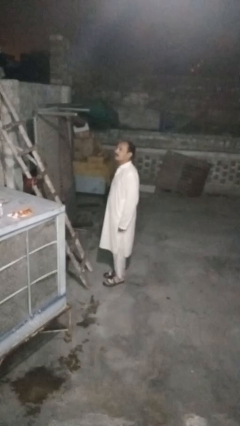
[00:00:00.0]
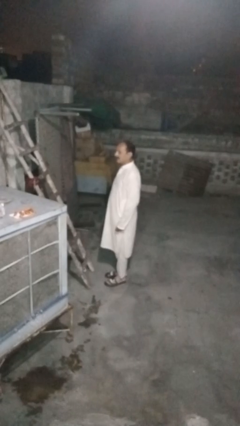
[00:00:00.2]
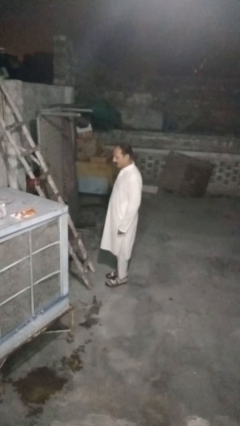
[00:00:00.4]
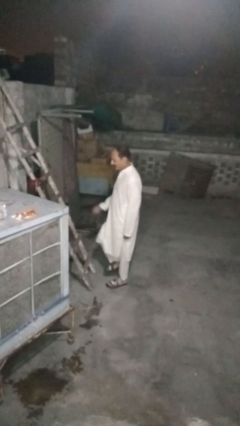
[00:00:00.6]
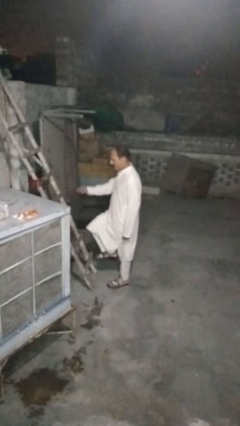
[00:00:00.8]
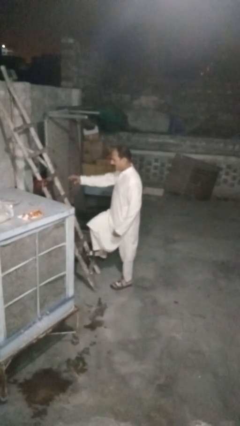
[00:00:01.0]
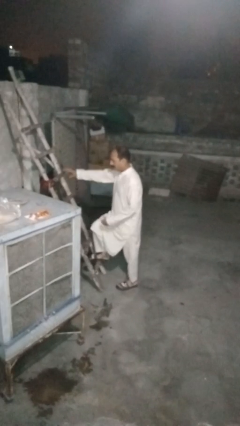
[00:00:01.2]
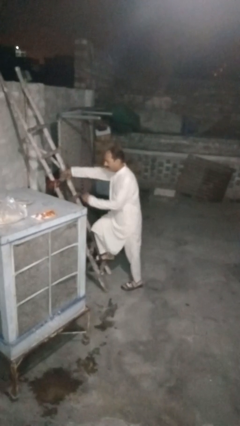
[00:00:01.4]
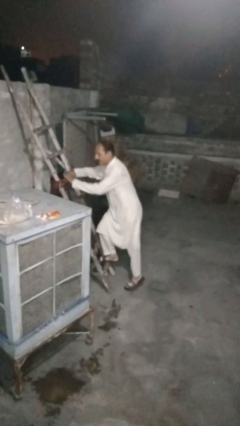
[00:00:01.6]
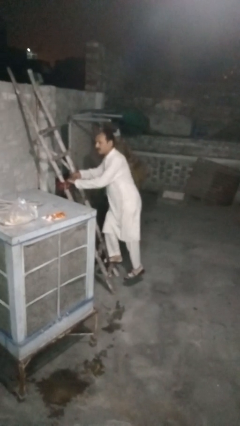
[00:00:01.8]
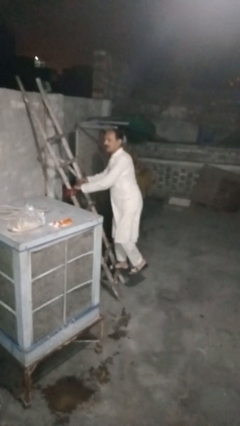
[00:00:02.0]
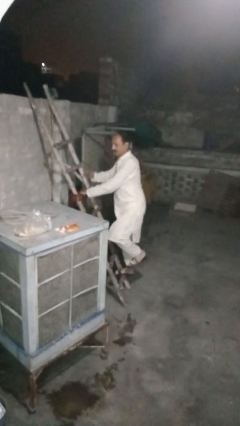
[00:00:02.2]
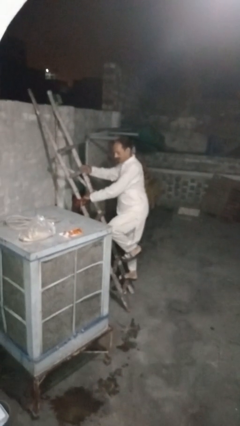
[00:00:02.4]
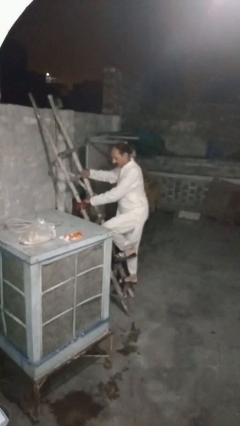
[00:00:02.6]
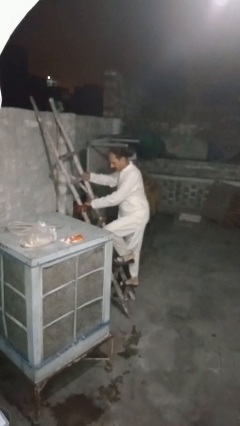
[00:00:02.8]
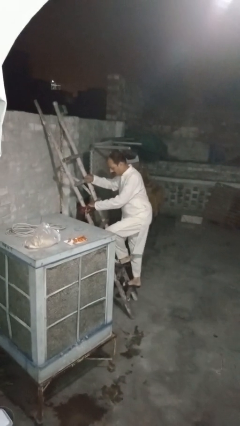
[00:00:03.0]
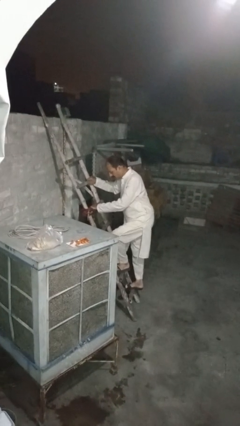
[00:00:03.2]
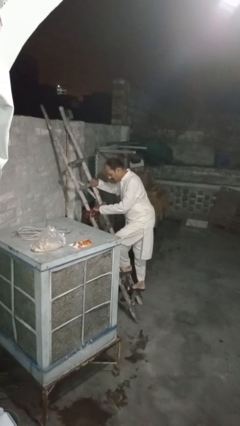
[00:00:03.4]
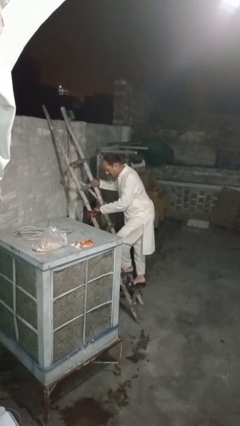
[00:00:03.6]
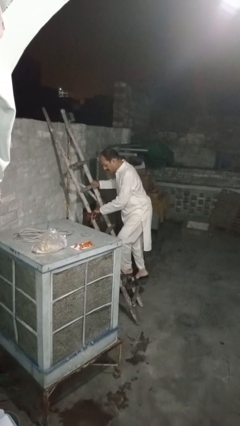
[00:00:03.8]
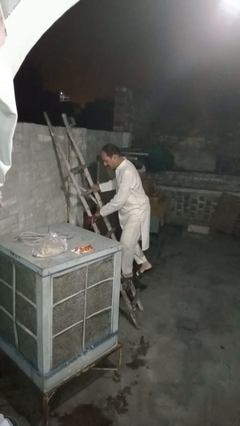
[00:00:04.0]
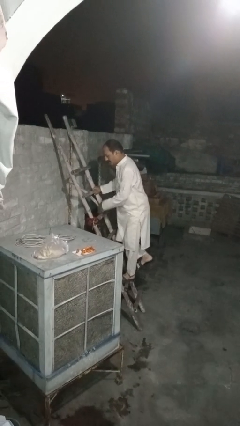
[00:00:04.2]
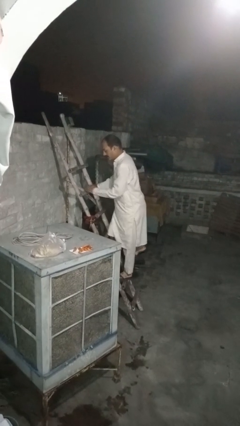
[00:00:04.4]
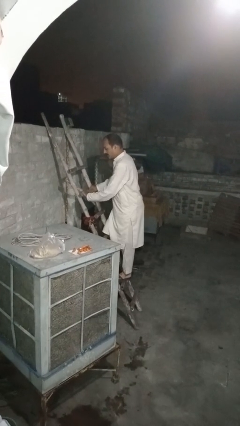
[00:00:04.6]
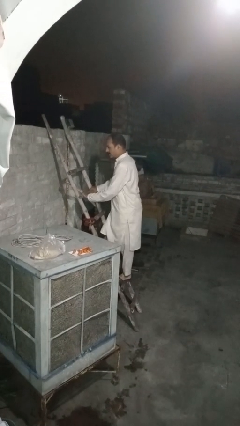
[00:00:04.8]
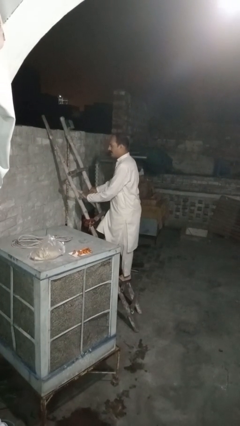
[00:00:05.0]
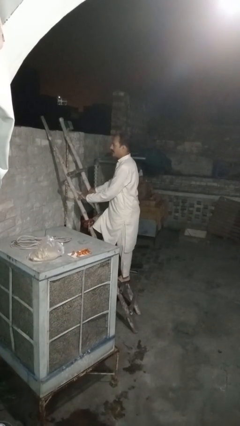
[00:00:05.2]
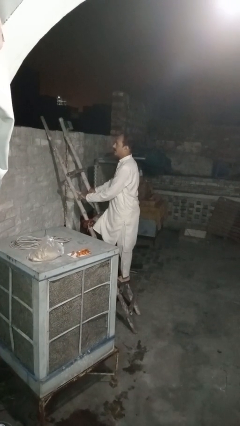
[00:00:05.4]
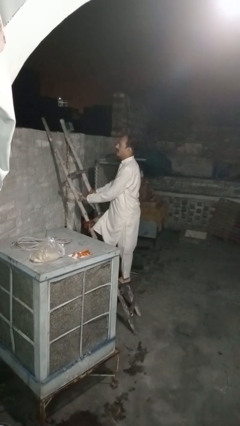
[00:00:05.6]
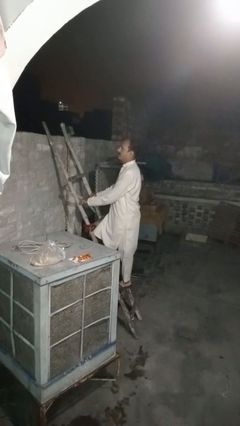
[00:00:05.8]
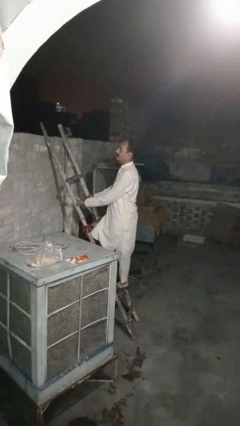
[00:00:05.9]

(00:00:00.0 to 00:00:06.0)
person climbs up ladder

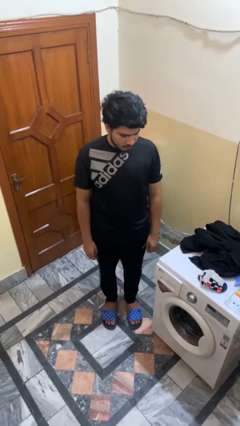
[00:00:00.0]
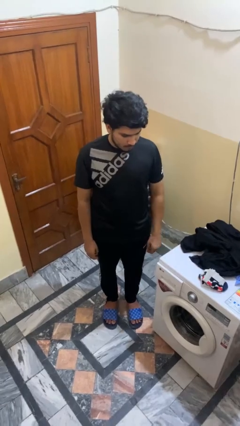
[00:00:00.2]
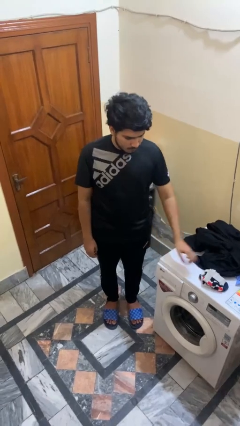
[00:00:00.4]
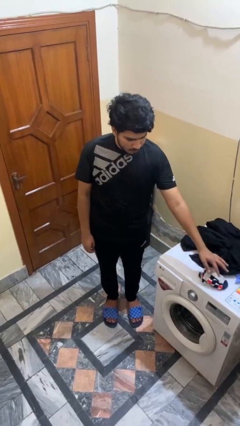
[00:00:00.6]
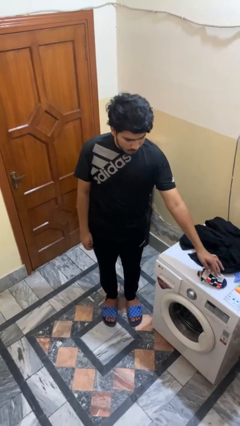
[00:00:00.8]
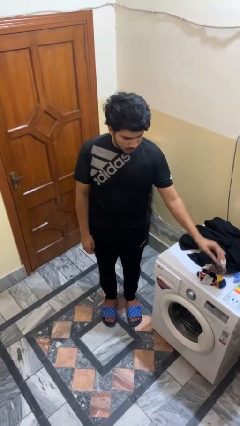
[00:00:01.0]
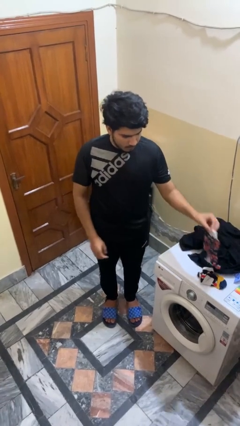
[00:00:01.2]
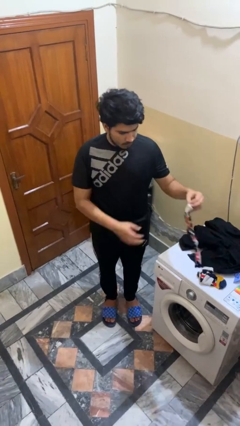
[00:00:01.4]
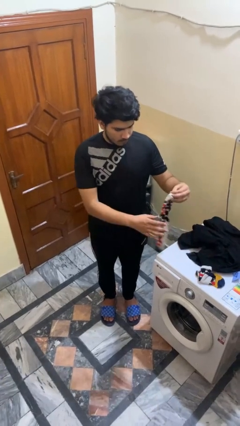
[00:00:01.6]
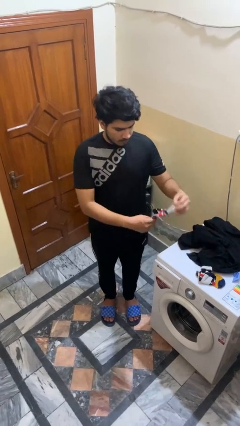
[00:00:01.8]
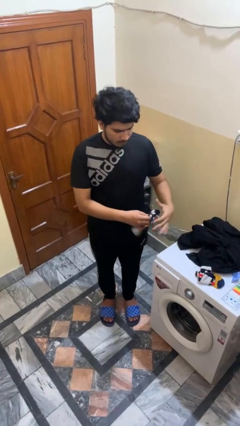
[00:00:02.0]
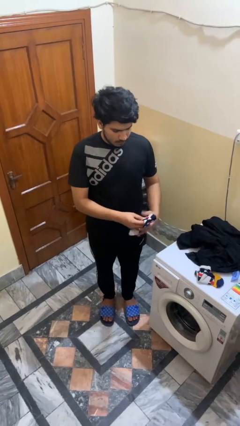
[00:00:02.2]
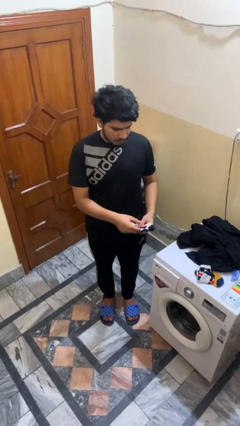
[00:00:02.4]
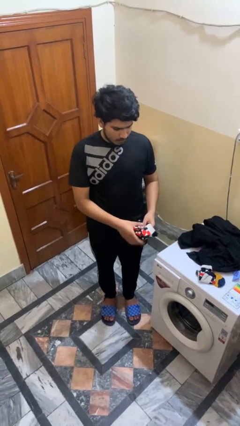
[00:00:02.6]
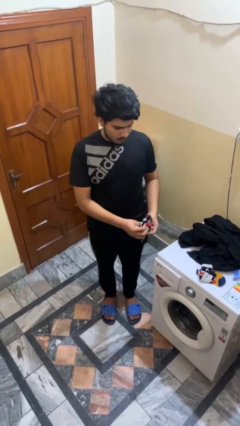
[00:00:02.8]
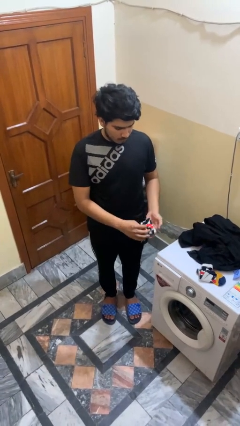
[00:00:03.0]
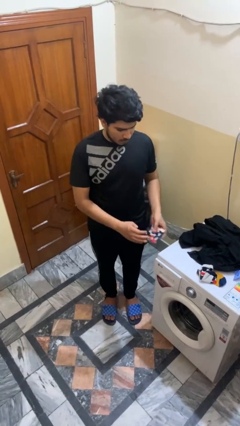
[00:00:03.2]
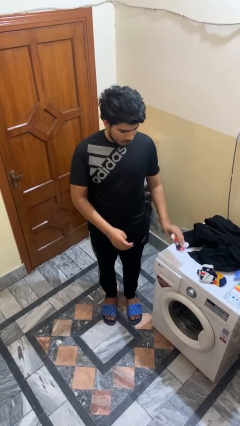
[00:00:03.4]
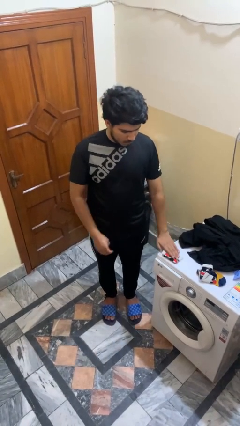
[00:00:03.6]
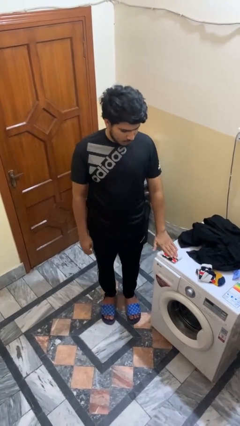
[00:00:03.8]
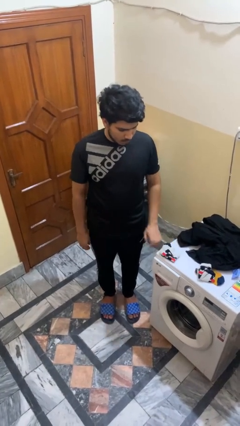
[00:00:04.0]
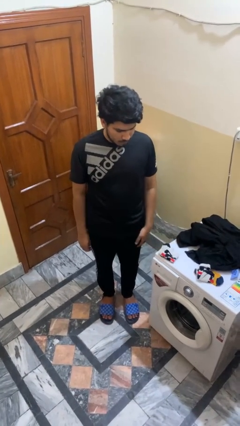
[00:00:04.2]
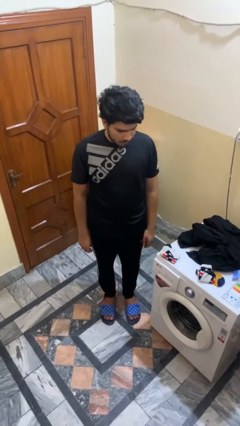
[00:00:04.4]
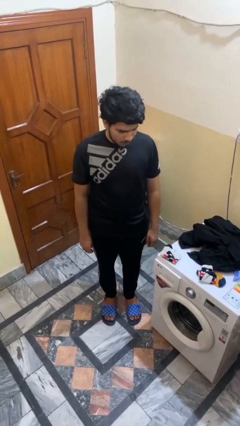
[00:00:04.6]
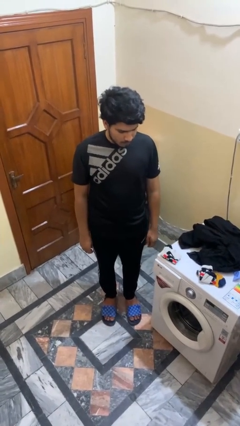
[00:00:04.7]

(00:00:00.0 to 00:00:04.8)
person folds socks

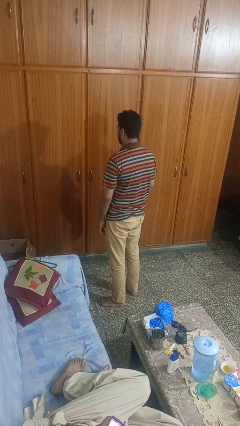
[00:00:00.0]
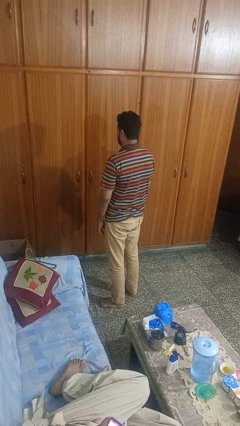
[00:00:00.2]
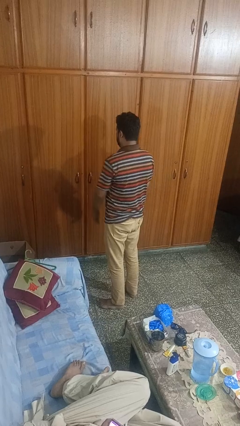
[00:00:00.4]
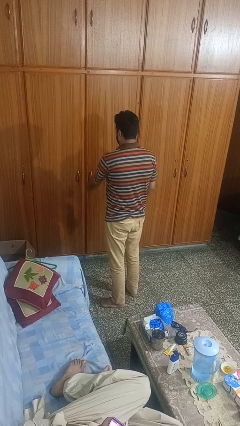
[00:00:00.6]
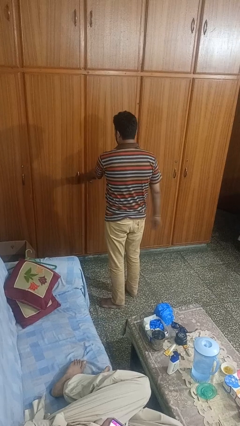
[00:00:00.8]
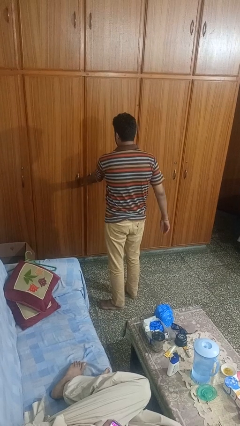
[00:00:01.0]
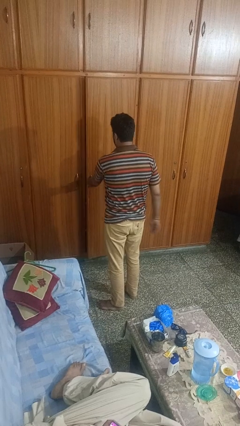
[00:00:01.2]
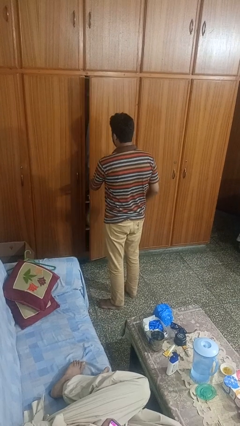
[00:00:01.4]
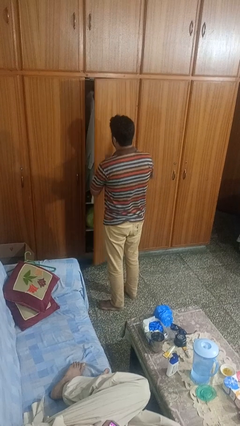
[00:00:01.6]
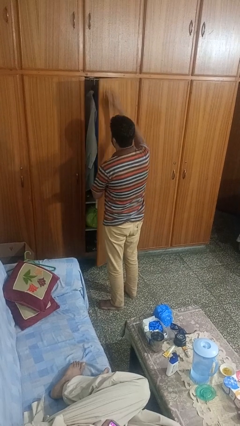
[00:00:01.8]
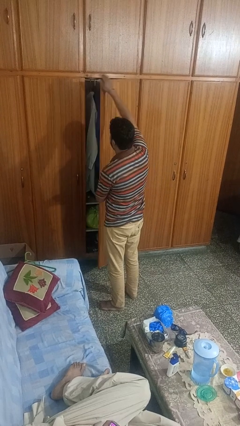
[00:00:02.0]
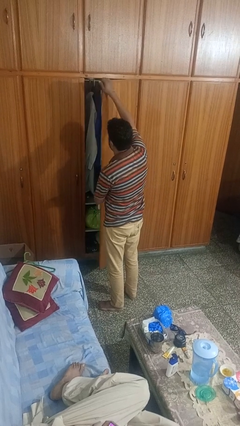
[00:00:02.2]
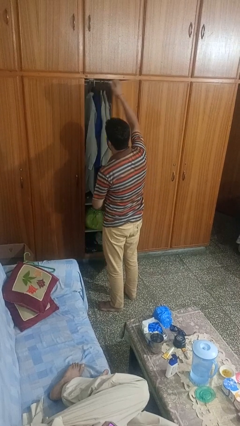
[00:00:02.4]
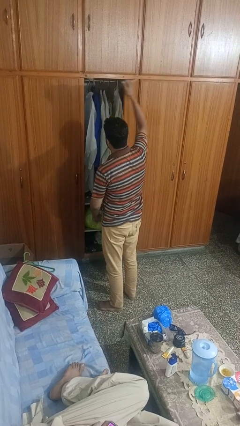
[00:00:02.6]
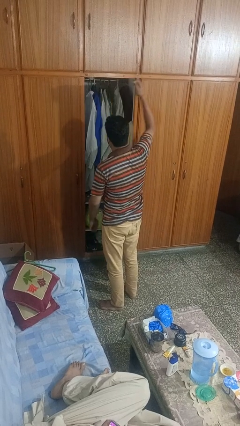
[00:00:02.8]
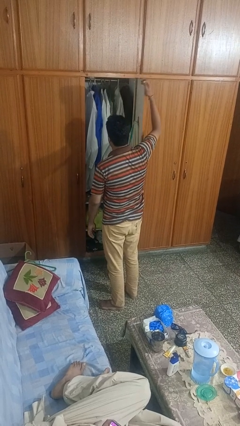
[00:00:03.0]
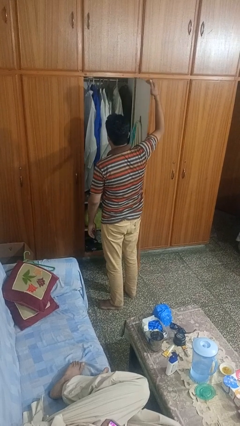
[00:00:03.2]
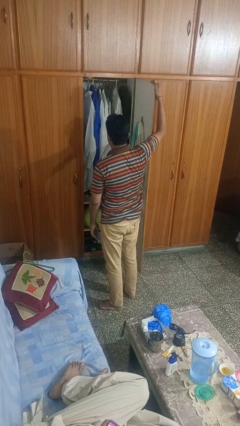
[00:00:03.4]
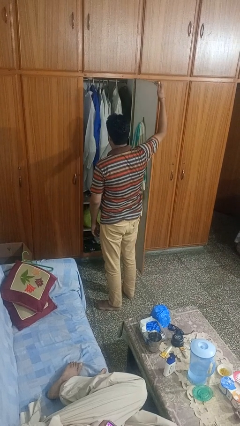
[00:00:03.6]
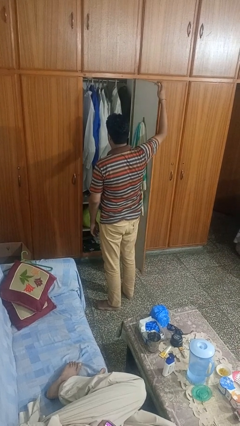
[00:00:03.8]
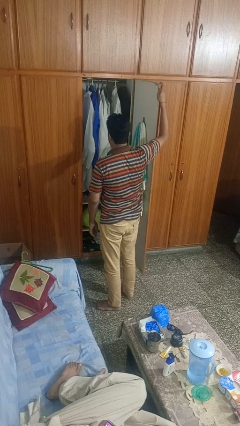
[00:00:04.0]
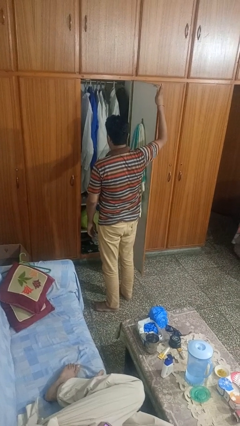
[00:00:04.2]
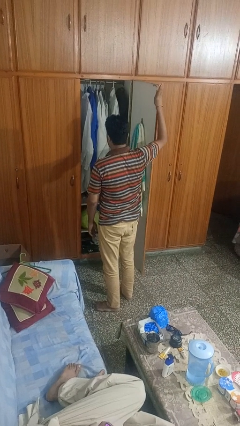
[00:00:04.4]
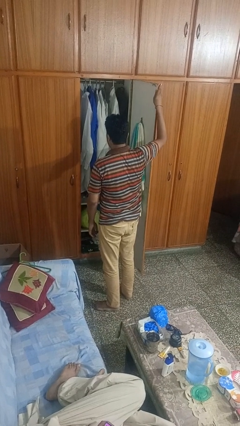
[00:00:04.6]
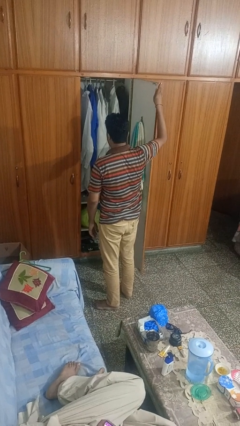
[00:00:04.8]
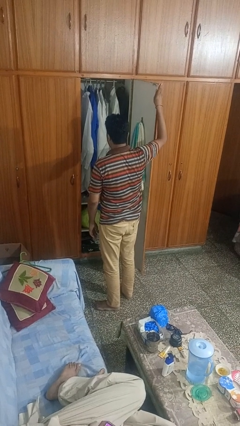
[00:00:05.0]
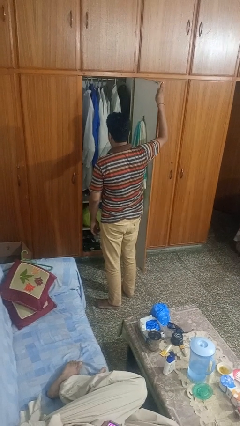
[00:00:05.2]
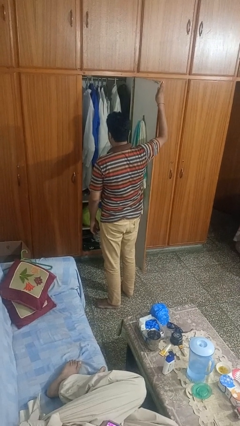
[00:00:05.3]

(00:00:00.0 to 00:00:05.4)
person opens closet door

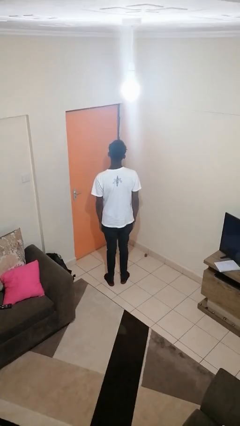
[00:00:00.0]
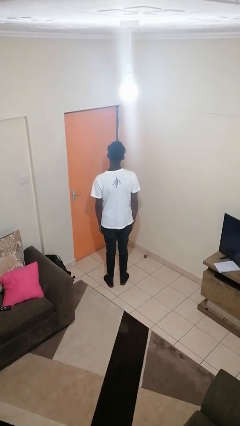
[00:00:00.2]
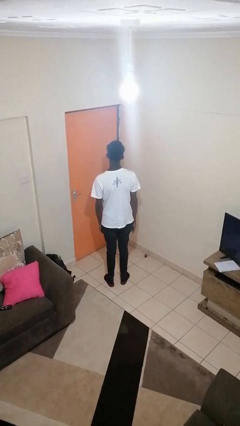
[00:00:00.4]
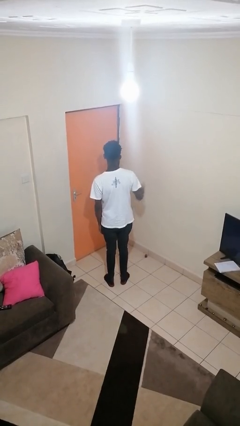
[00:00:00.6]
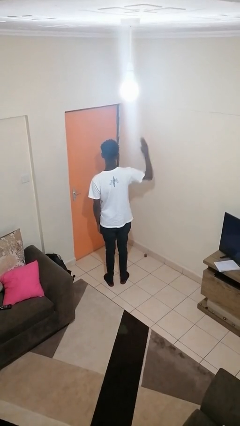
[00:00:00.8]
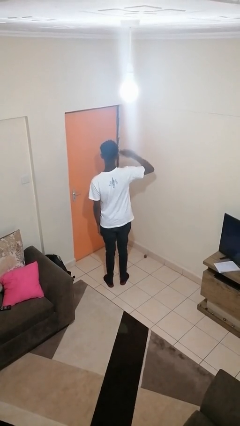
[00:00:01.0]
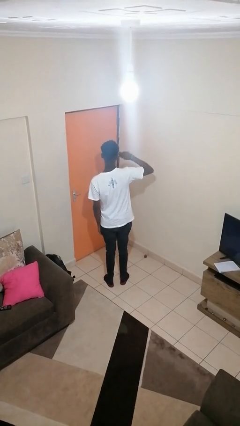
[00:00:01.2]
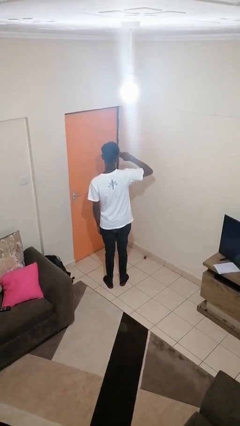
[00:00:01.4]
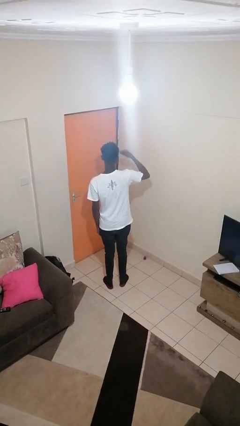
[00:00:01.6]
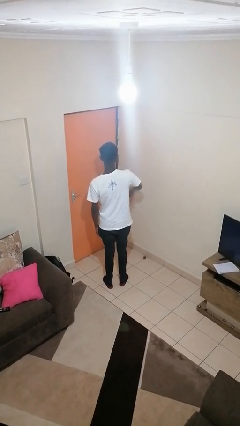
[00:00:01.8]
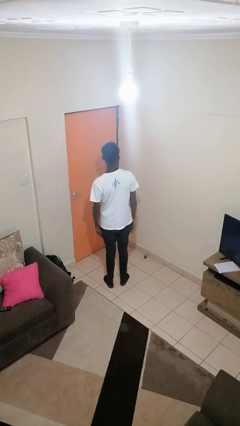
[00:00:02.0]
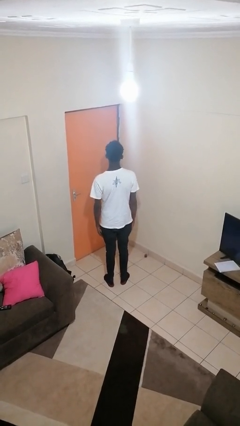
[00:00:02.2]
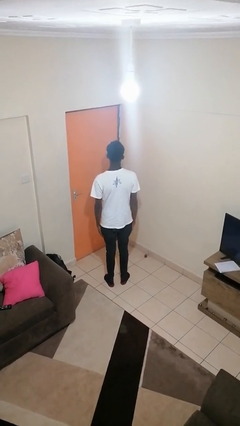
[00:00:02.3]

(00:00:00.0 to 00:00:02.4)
person salutes
